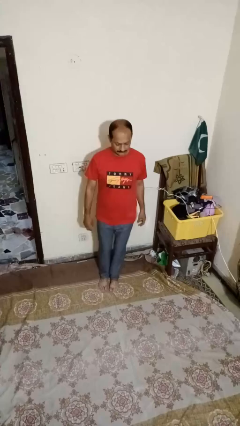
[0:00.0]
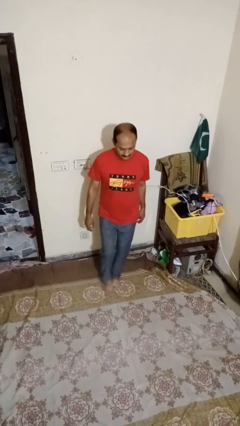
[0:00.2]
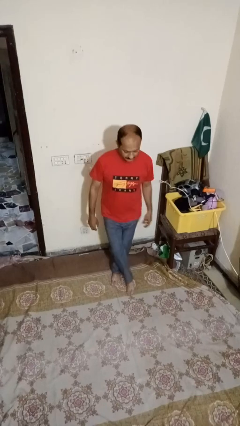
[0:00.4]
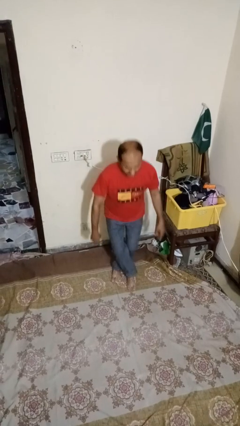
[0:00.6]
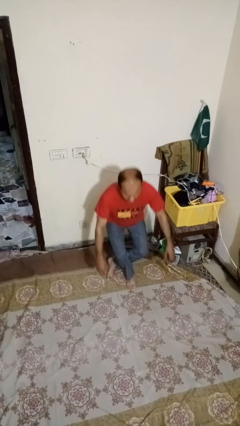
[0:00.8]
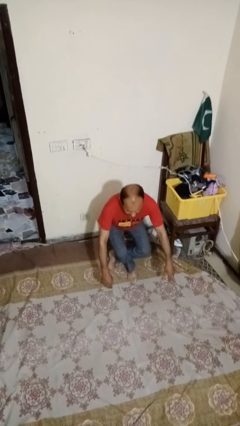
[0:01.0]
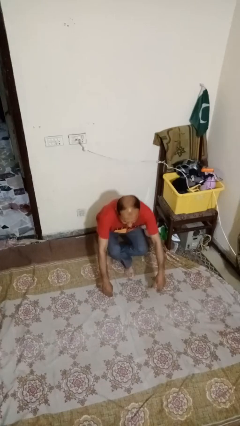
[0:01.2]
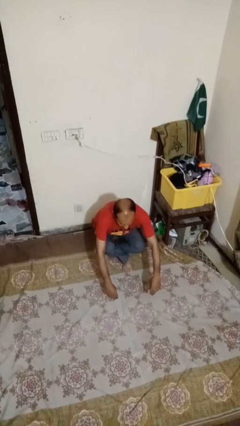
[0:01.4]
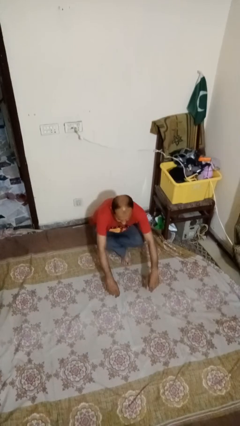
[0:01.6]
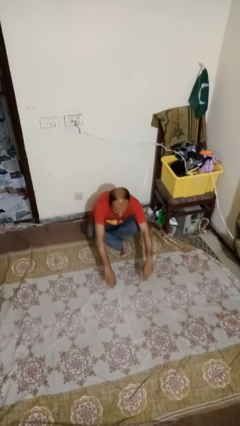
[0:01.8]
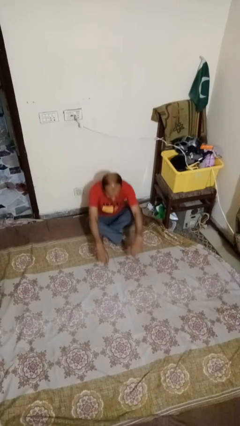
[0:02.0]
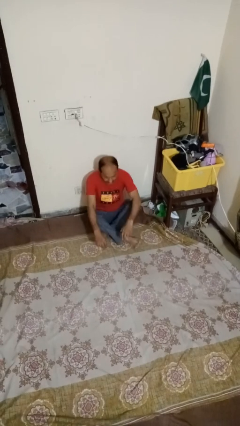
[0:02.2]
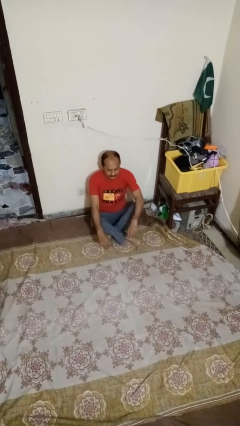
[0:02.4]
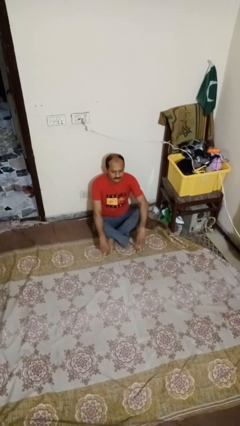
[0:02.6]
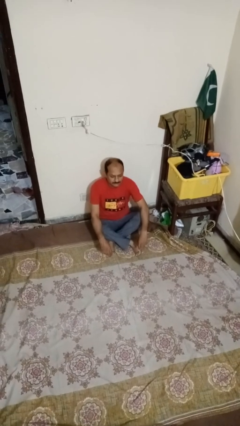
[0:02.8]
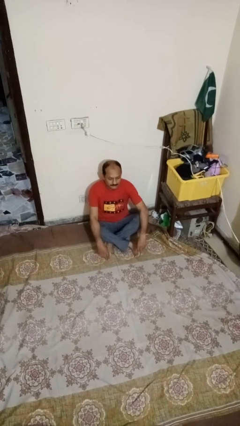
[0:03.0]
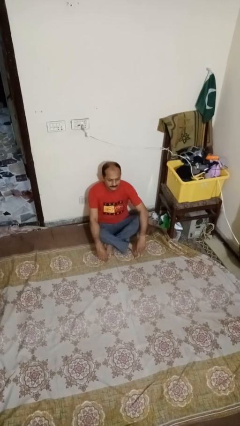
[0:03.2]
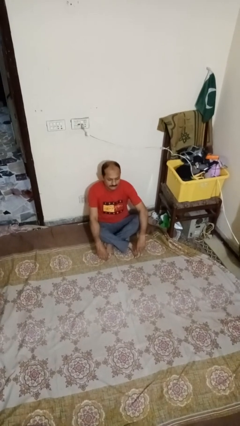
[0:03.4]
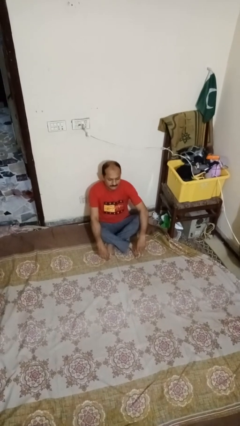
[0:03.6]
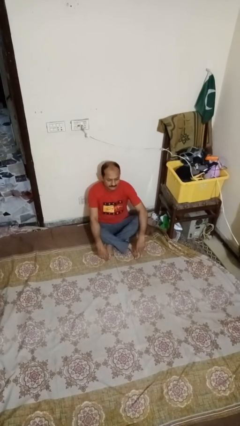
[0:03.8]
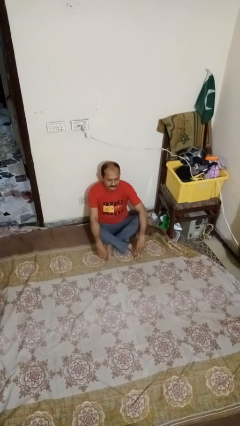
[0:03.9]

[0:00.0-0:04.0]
person sits crisscross

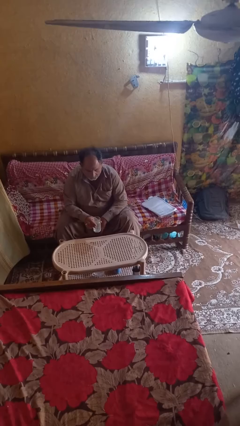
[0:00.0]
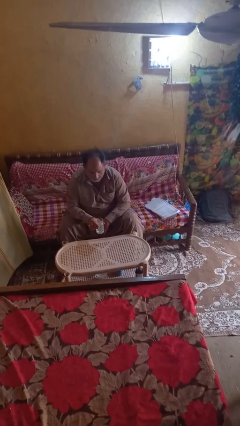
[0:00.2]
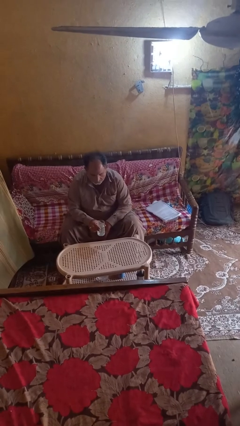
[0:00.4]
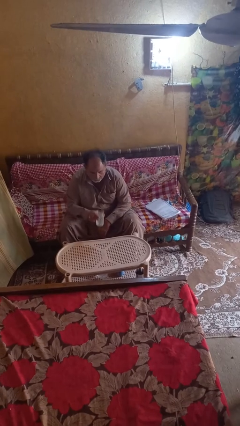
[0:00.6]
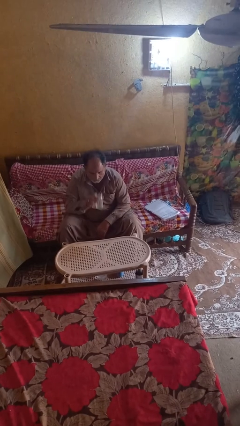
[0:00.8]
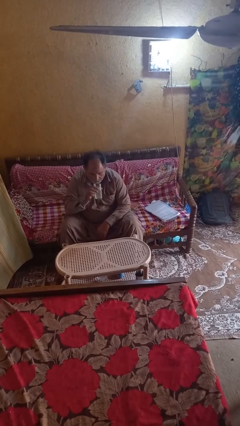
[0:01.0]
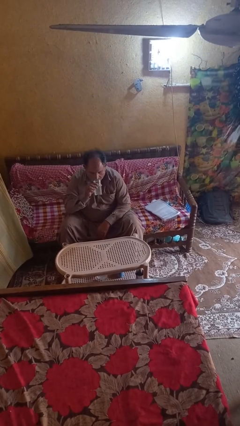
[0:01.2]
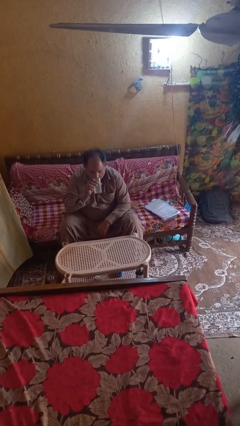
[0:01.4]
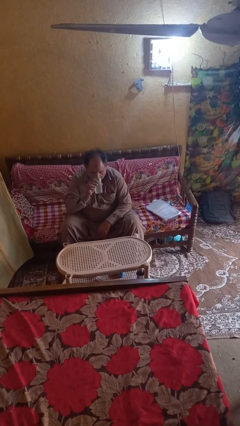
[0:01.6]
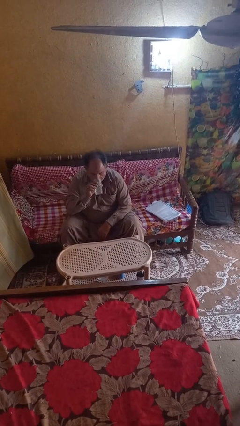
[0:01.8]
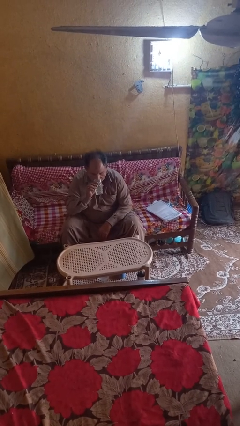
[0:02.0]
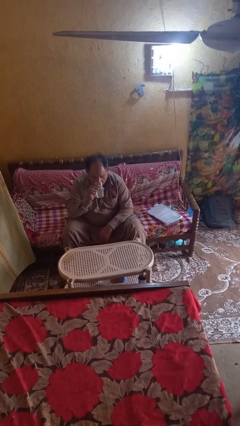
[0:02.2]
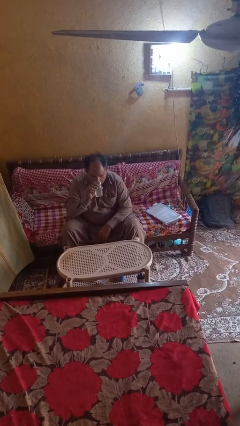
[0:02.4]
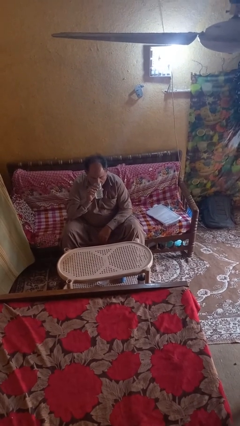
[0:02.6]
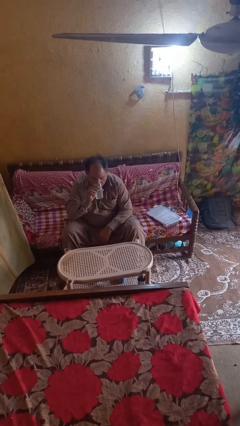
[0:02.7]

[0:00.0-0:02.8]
person drinks from shotglass

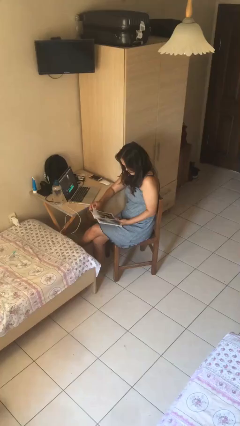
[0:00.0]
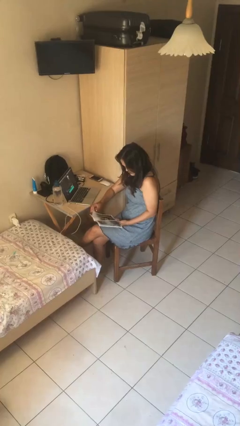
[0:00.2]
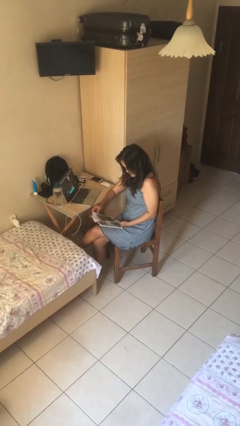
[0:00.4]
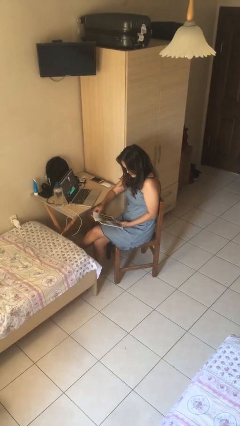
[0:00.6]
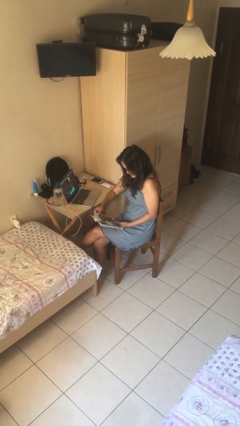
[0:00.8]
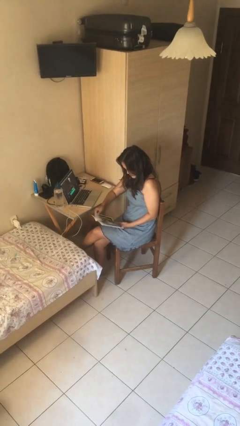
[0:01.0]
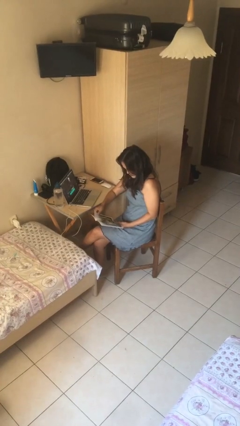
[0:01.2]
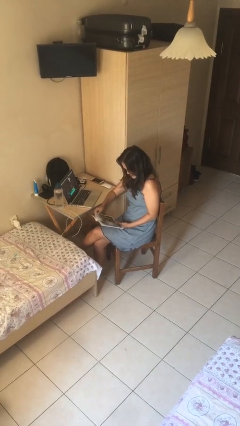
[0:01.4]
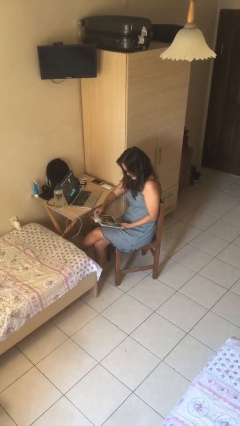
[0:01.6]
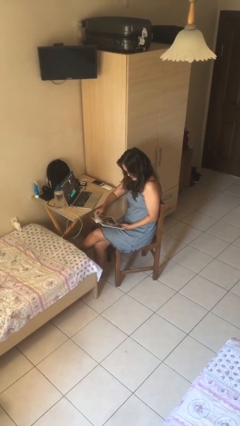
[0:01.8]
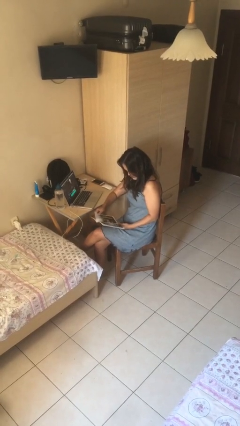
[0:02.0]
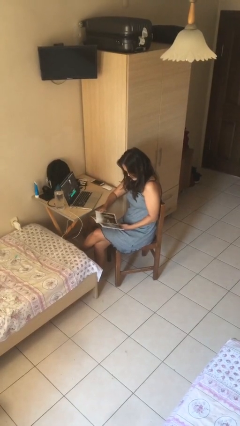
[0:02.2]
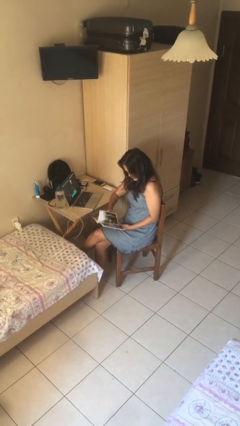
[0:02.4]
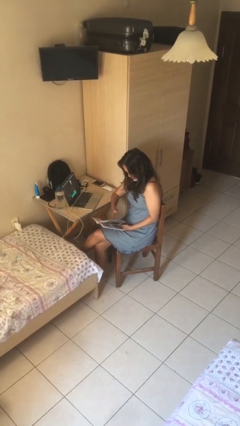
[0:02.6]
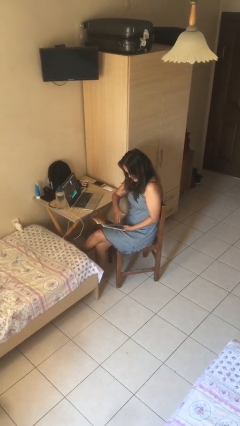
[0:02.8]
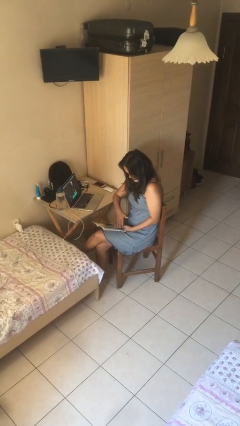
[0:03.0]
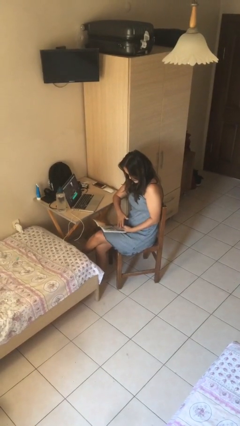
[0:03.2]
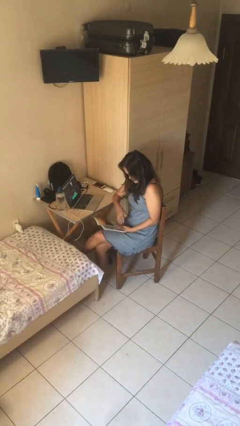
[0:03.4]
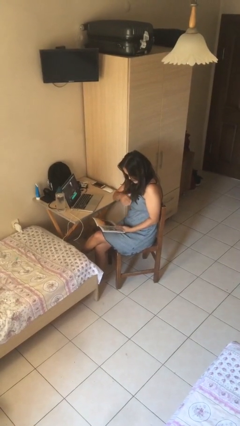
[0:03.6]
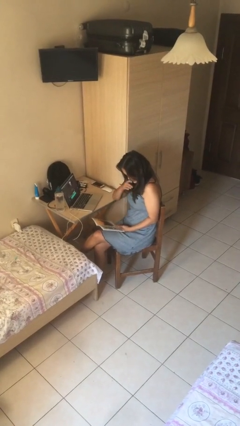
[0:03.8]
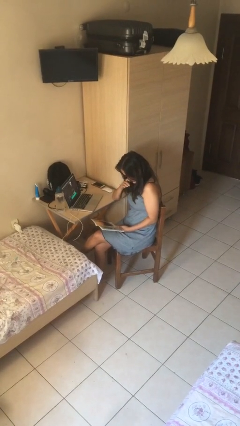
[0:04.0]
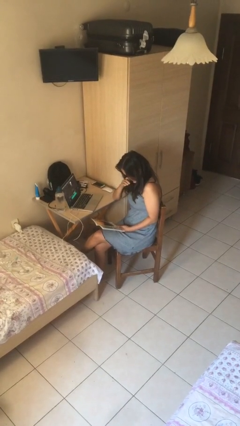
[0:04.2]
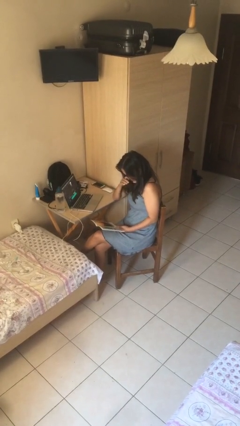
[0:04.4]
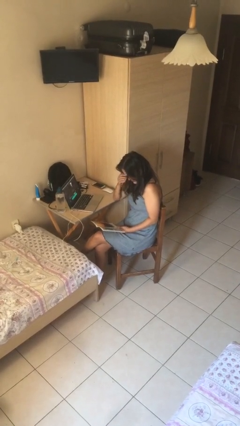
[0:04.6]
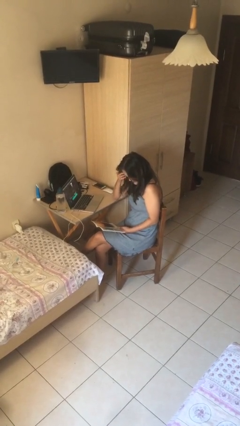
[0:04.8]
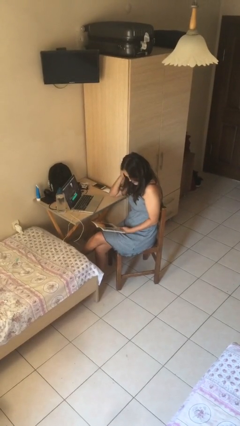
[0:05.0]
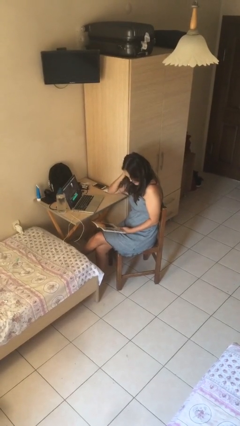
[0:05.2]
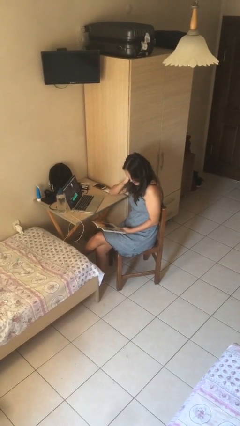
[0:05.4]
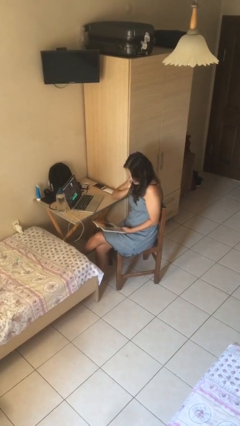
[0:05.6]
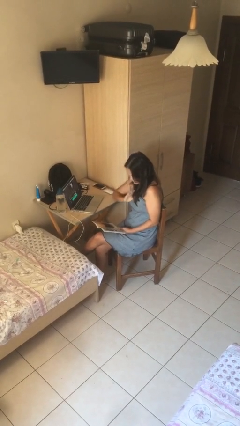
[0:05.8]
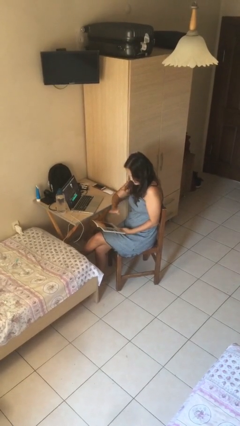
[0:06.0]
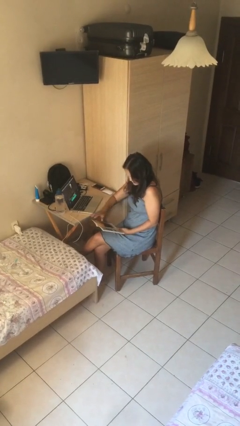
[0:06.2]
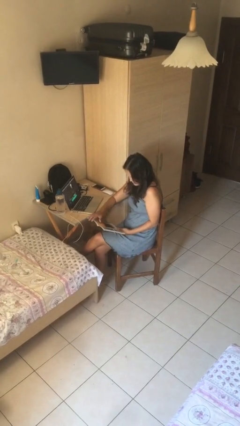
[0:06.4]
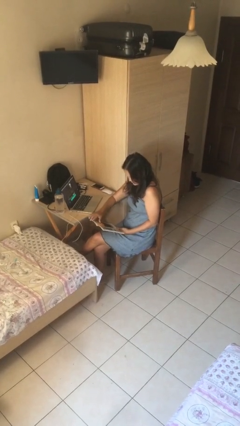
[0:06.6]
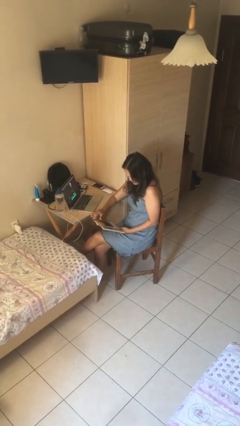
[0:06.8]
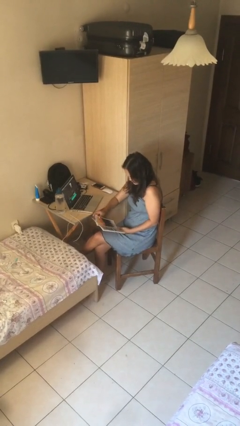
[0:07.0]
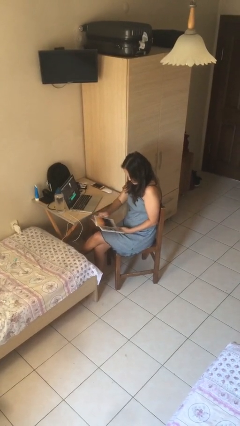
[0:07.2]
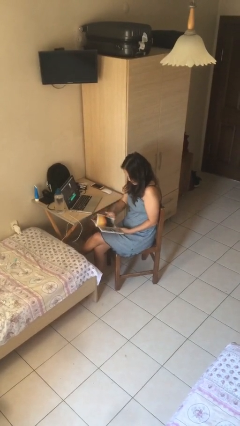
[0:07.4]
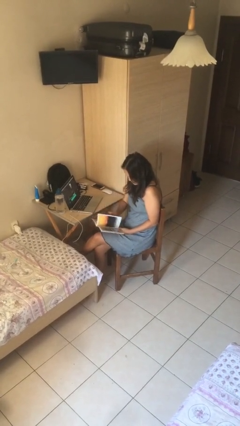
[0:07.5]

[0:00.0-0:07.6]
person reads document

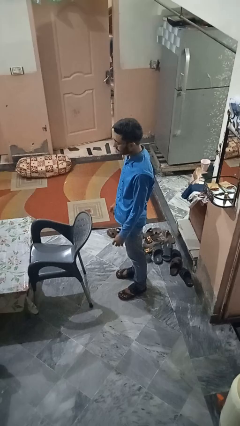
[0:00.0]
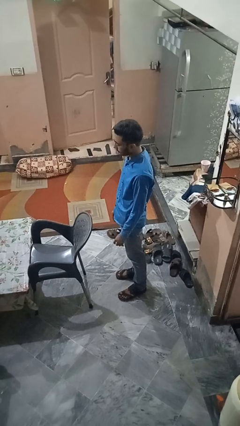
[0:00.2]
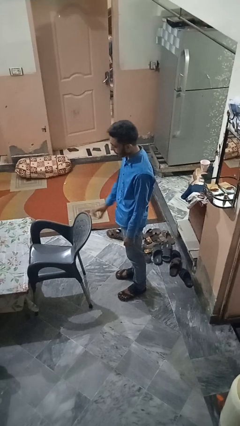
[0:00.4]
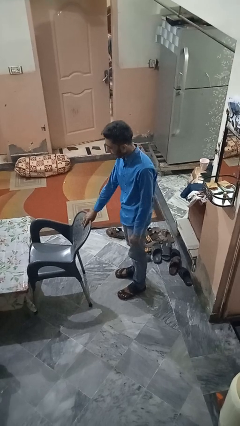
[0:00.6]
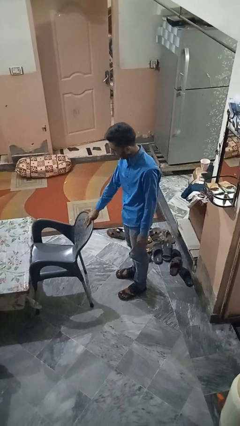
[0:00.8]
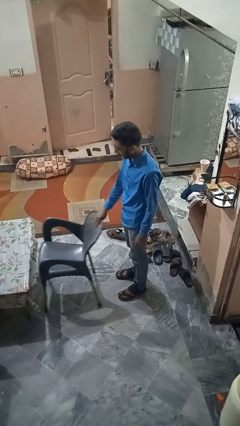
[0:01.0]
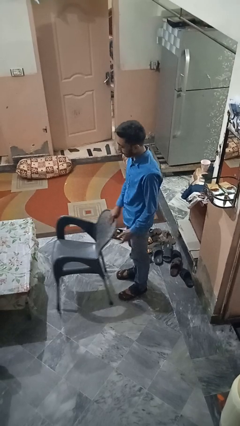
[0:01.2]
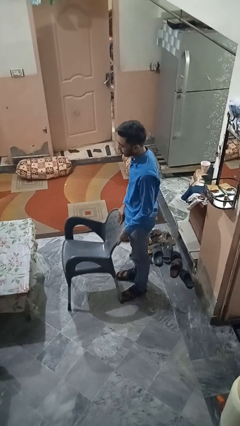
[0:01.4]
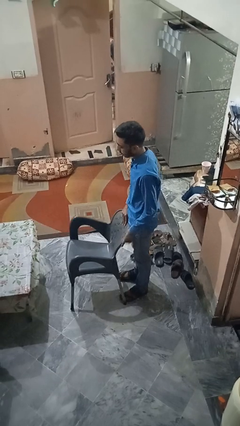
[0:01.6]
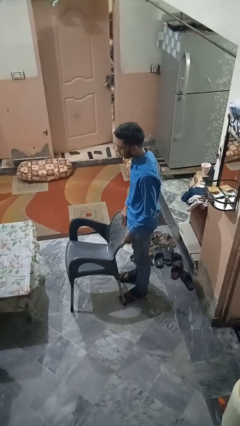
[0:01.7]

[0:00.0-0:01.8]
person pulls out chair

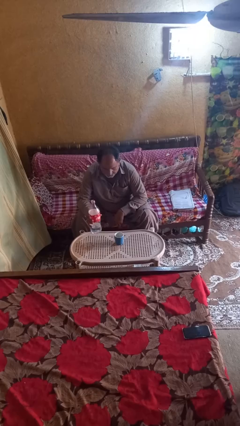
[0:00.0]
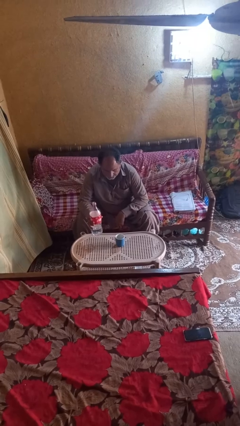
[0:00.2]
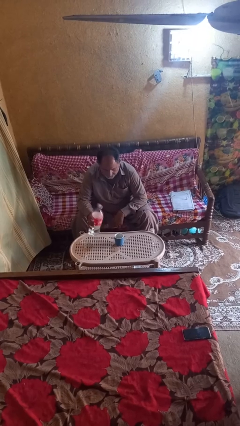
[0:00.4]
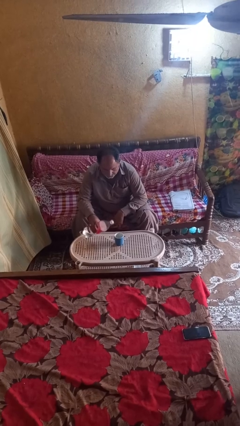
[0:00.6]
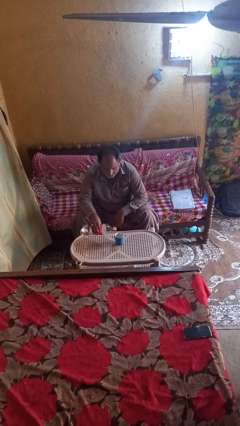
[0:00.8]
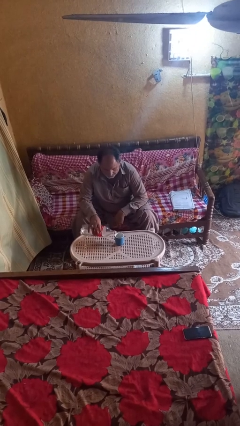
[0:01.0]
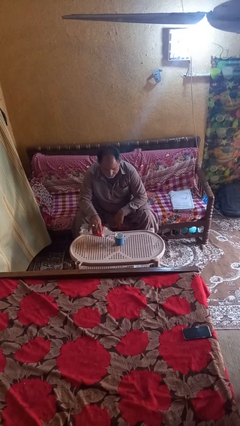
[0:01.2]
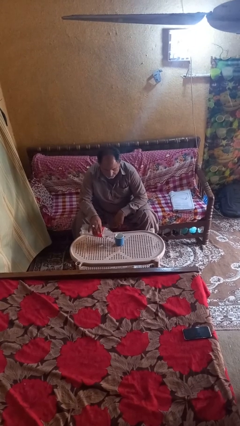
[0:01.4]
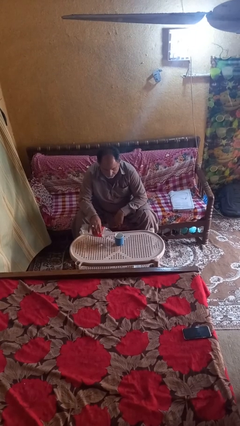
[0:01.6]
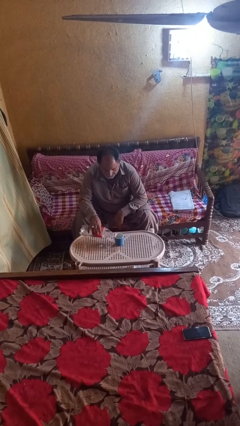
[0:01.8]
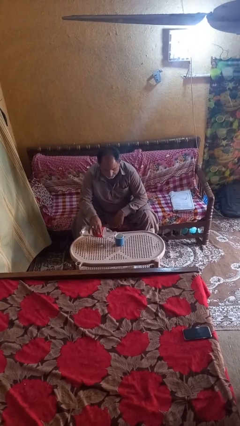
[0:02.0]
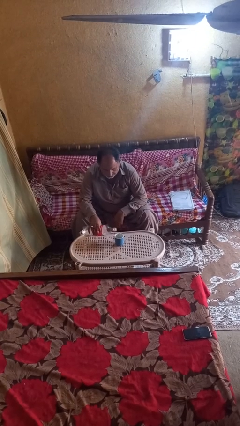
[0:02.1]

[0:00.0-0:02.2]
person pours liquid into cup
